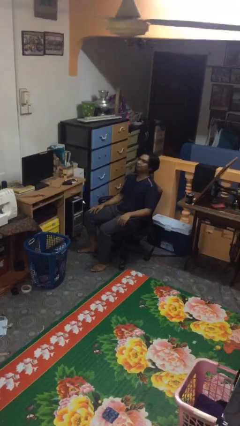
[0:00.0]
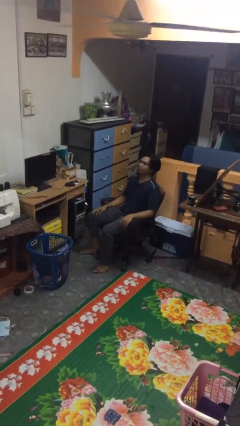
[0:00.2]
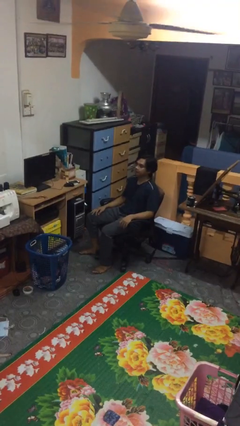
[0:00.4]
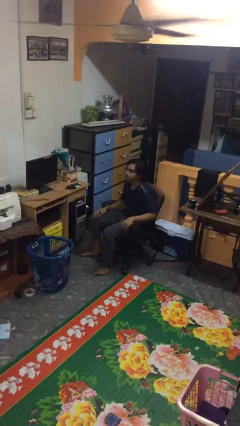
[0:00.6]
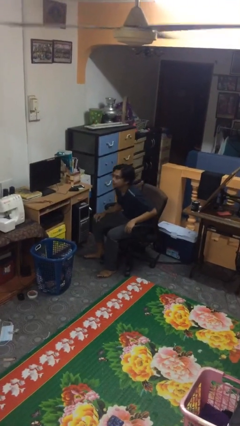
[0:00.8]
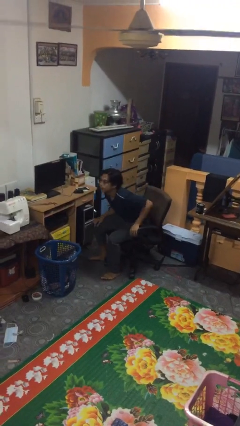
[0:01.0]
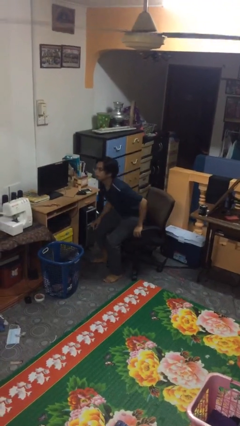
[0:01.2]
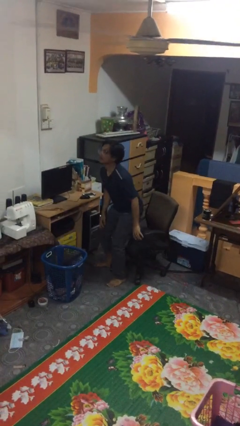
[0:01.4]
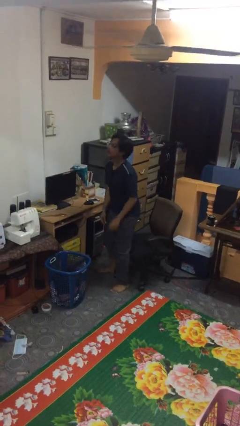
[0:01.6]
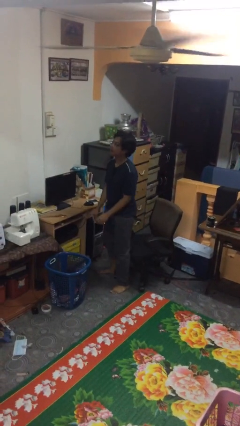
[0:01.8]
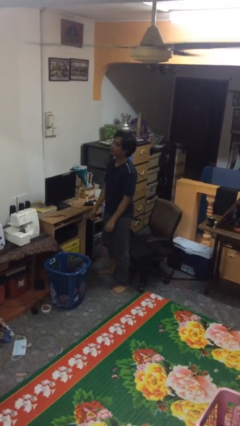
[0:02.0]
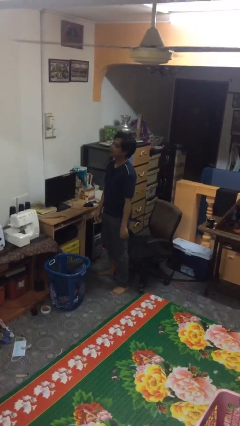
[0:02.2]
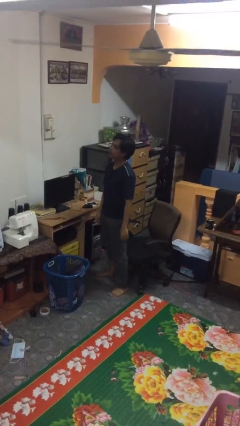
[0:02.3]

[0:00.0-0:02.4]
person stands up

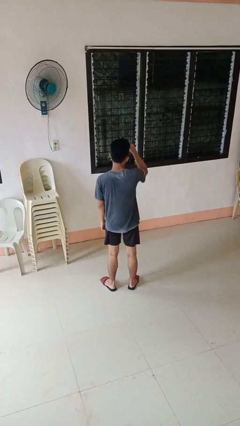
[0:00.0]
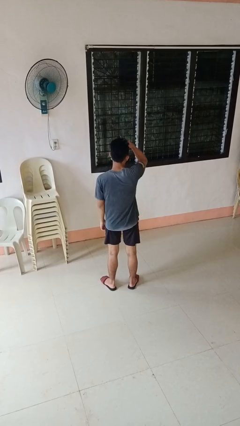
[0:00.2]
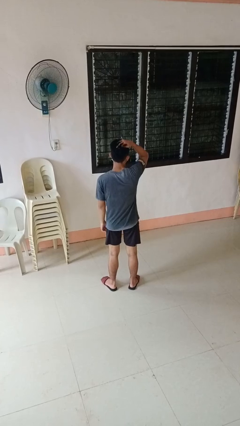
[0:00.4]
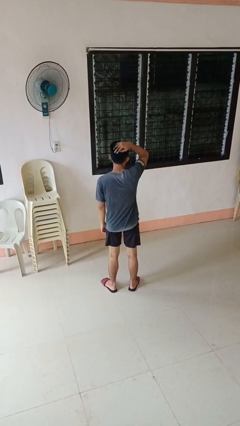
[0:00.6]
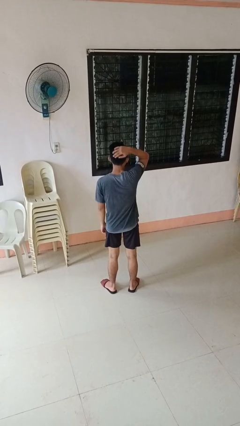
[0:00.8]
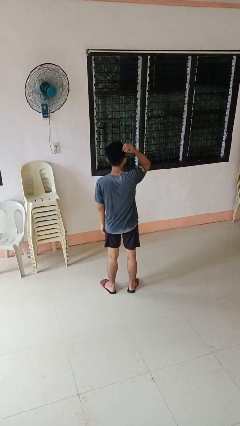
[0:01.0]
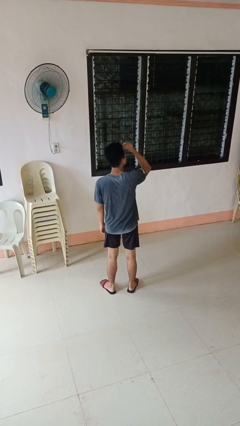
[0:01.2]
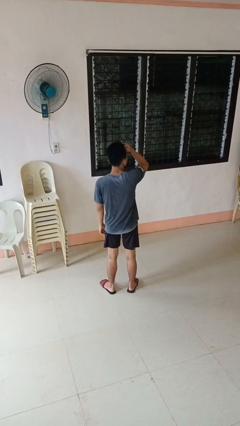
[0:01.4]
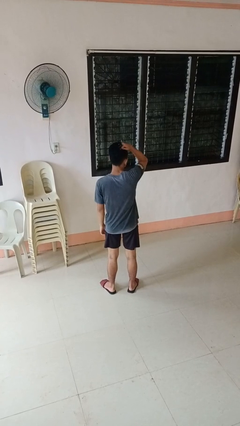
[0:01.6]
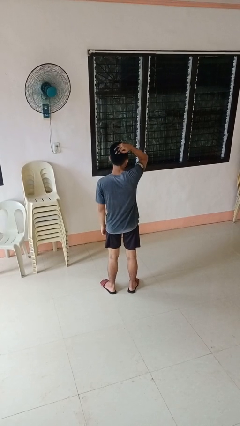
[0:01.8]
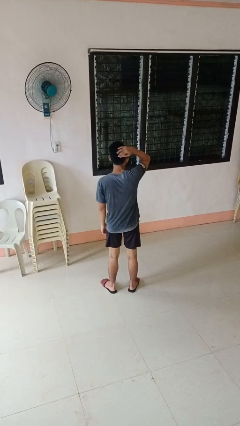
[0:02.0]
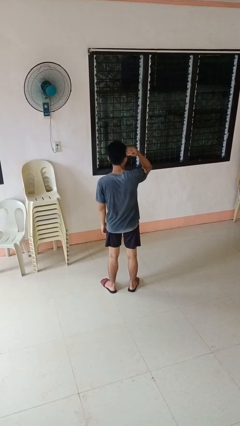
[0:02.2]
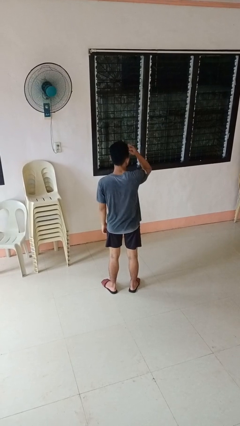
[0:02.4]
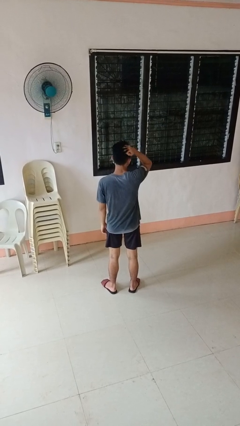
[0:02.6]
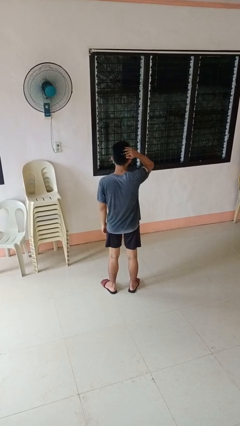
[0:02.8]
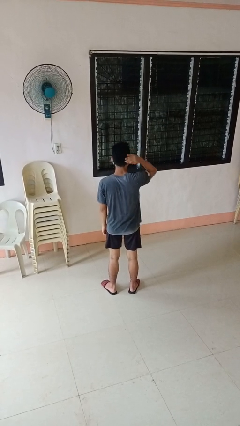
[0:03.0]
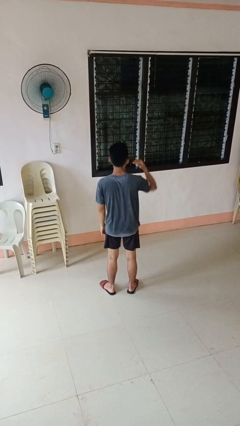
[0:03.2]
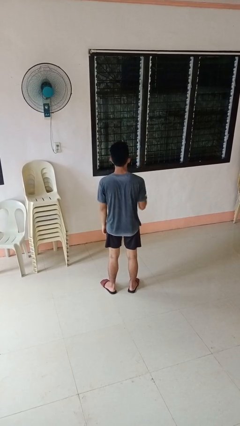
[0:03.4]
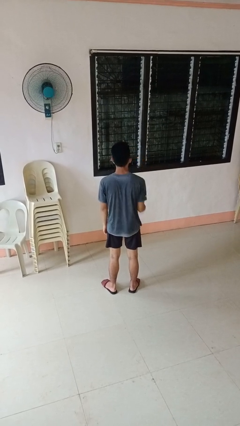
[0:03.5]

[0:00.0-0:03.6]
person strokes hair

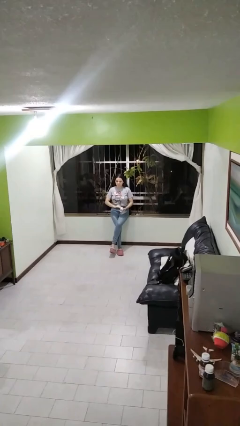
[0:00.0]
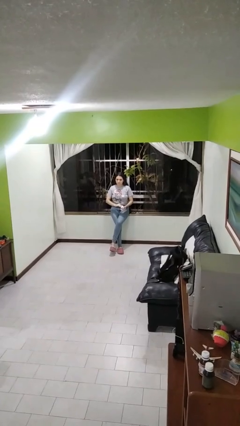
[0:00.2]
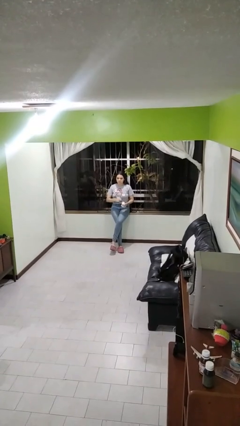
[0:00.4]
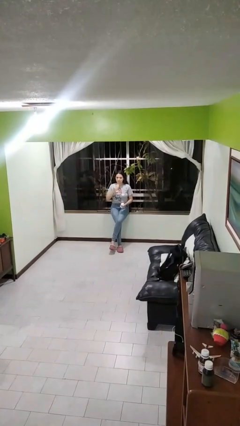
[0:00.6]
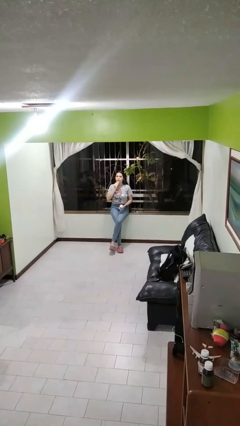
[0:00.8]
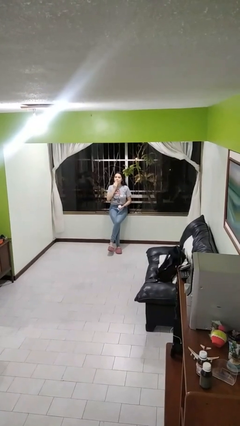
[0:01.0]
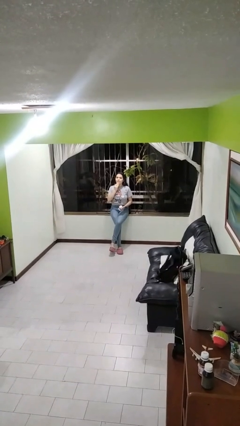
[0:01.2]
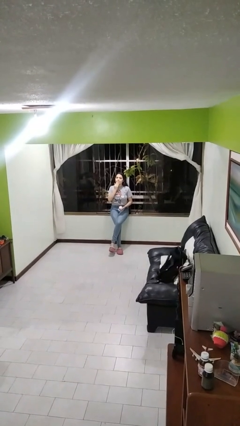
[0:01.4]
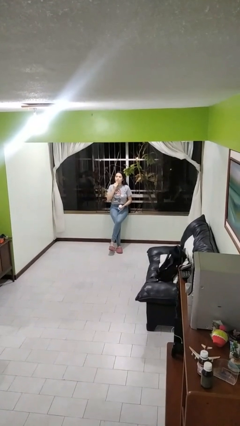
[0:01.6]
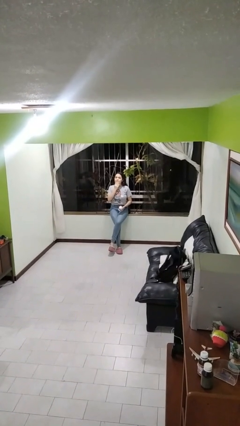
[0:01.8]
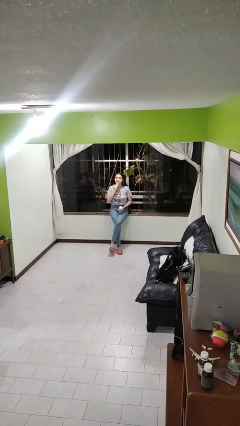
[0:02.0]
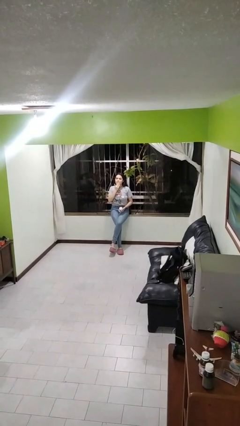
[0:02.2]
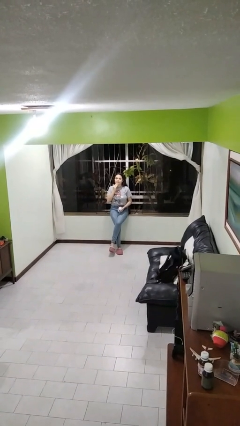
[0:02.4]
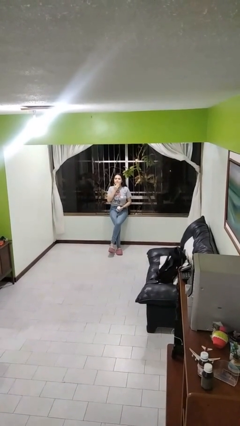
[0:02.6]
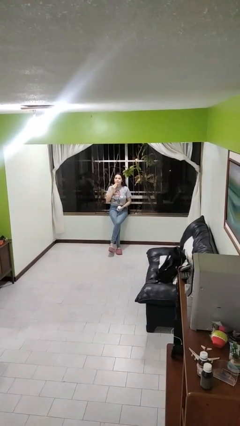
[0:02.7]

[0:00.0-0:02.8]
person applies facial moisturizer

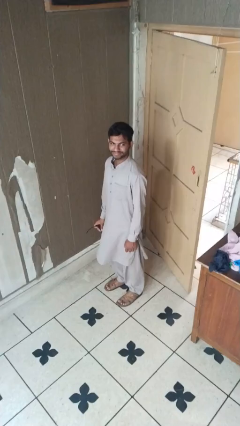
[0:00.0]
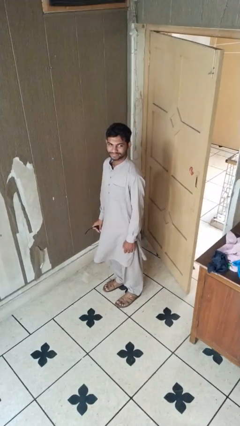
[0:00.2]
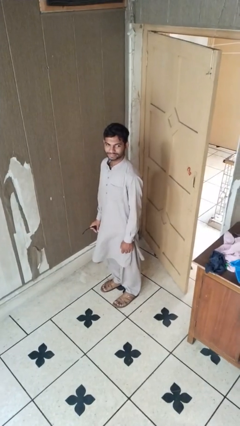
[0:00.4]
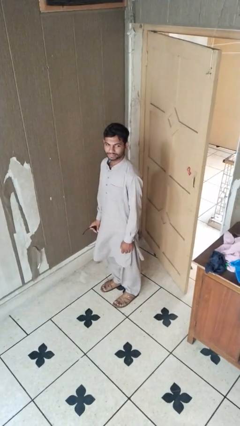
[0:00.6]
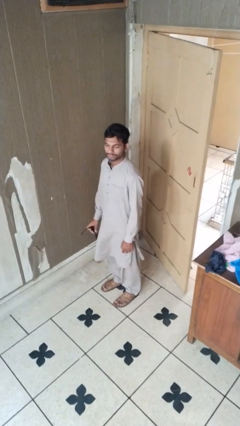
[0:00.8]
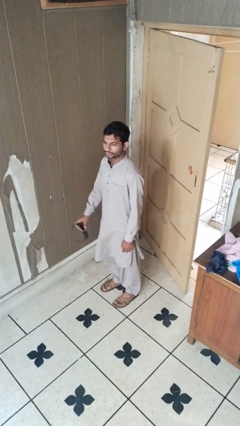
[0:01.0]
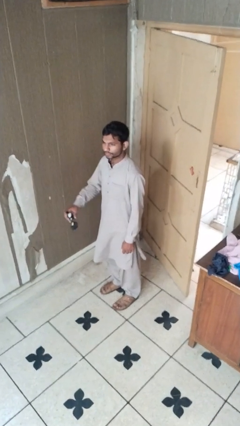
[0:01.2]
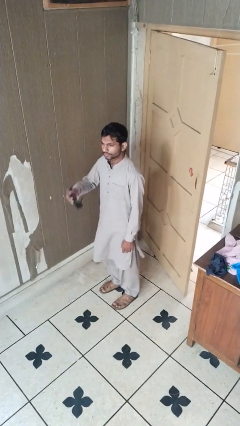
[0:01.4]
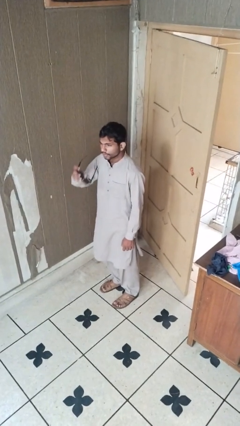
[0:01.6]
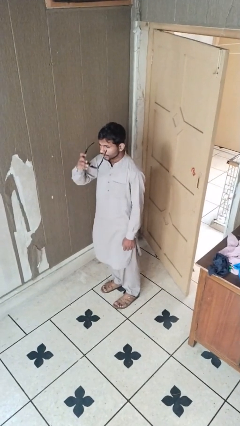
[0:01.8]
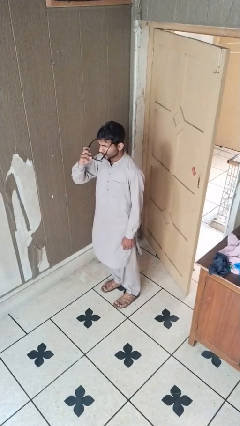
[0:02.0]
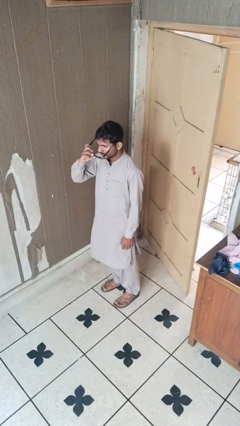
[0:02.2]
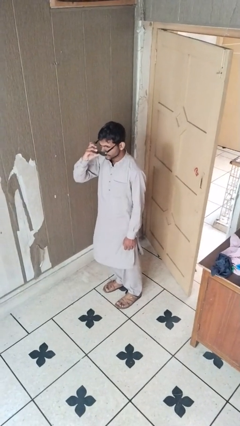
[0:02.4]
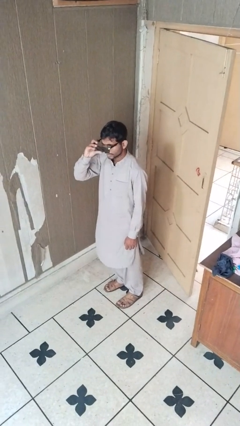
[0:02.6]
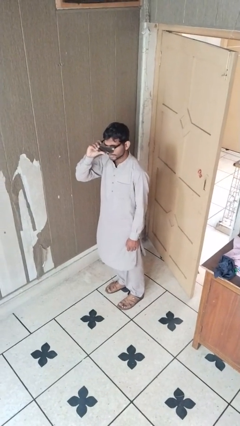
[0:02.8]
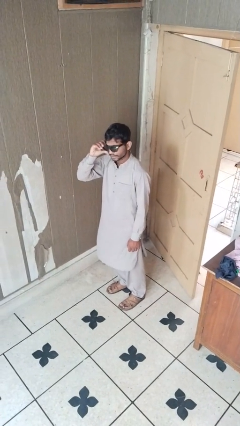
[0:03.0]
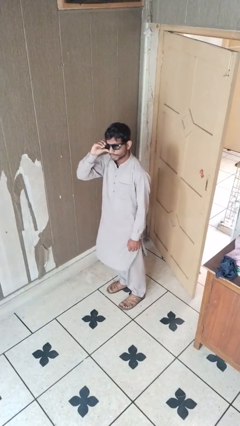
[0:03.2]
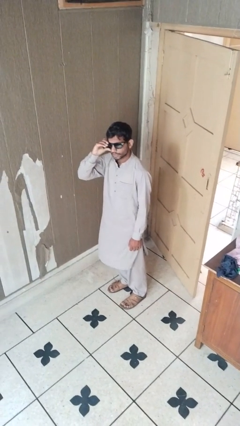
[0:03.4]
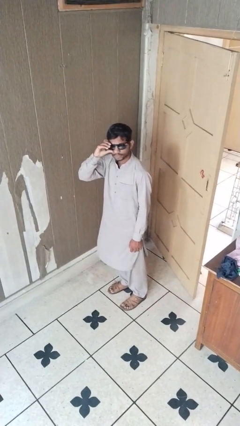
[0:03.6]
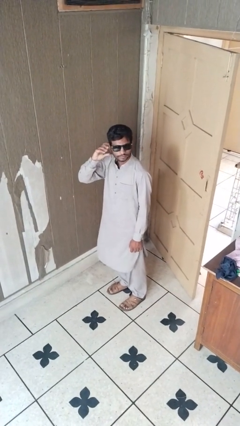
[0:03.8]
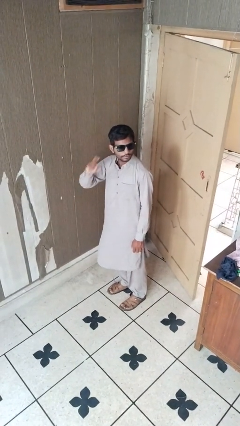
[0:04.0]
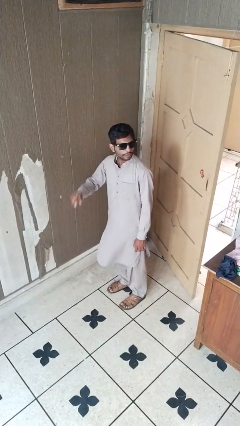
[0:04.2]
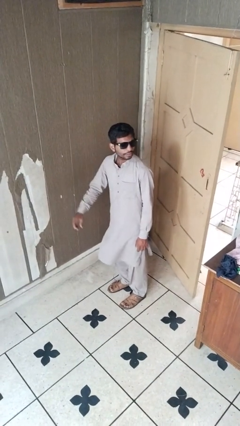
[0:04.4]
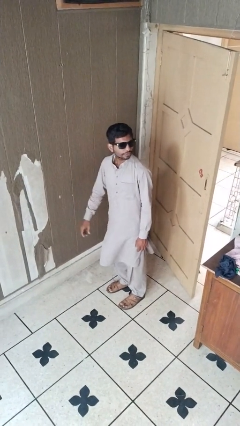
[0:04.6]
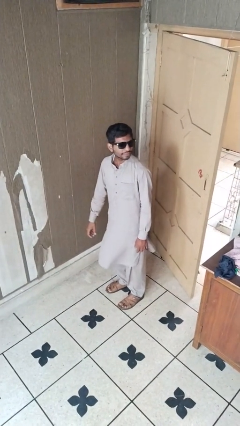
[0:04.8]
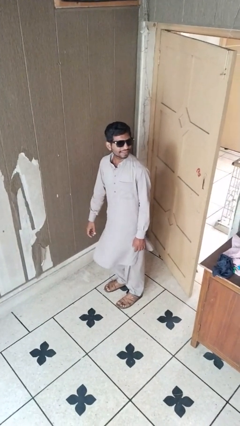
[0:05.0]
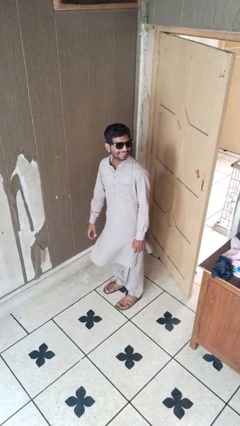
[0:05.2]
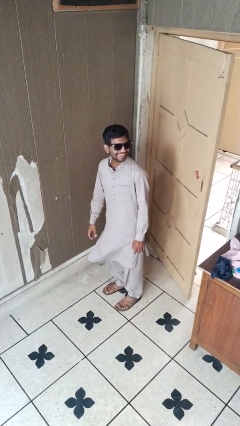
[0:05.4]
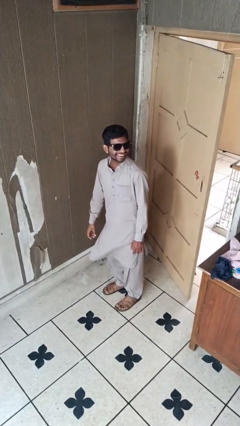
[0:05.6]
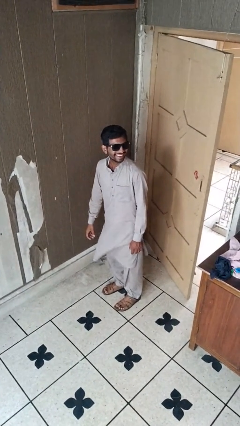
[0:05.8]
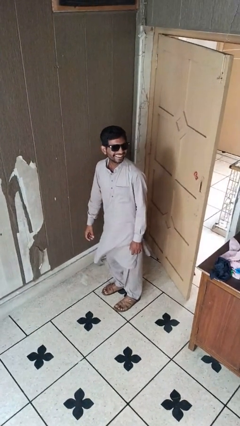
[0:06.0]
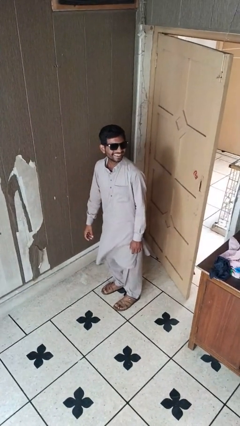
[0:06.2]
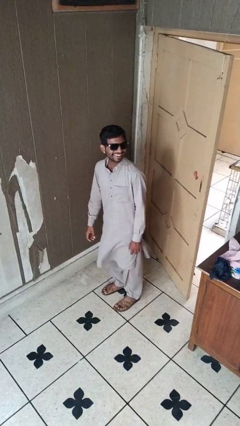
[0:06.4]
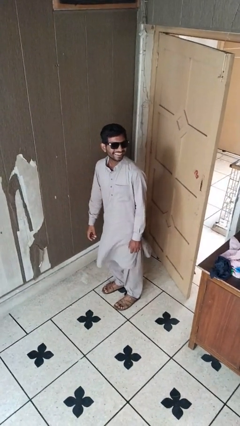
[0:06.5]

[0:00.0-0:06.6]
person puts on sunglasses

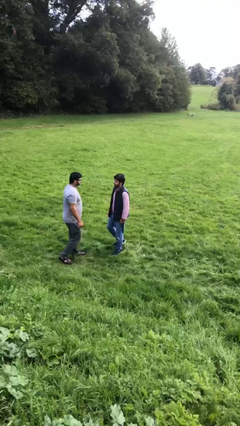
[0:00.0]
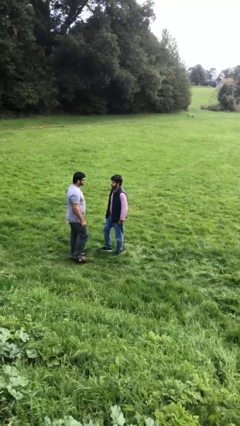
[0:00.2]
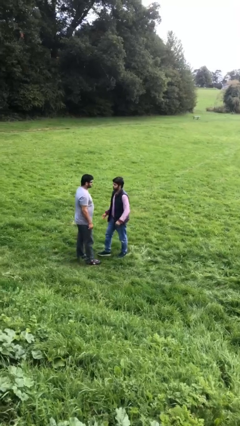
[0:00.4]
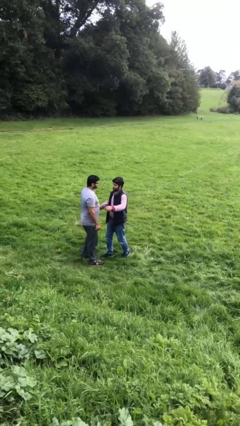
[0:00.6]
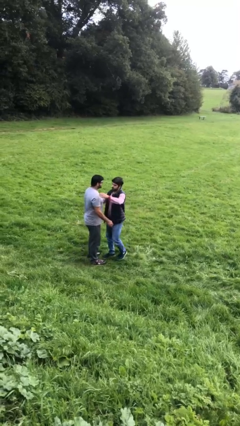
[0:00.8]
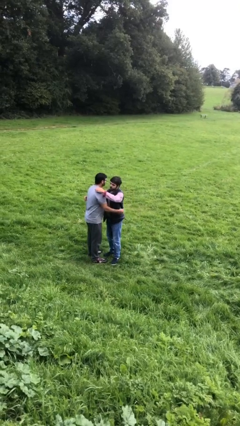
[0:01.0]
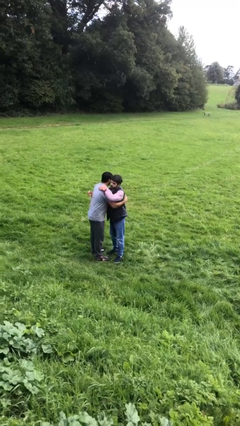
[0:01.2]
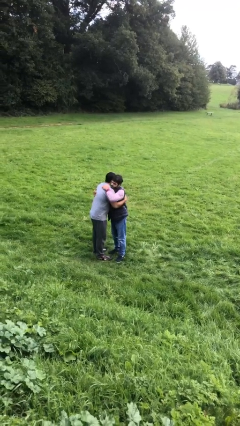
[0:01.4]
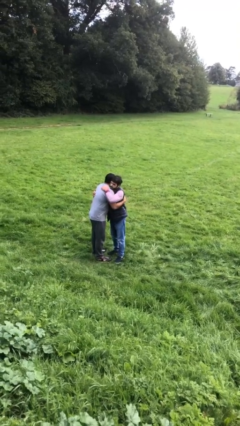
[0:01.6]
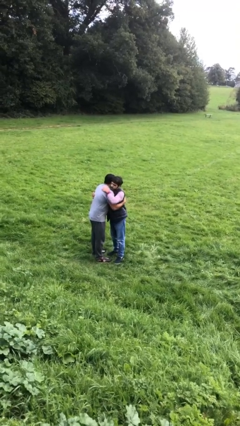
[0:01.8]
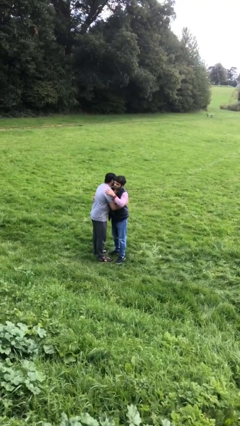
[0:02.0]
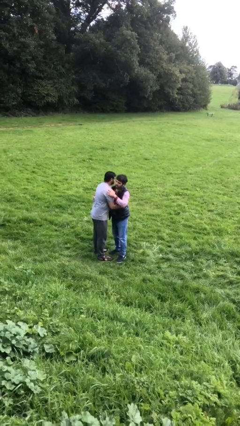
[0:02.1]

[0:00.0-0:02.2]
person embraces person
